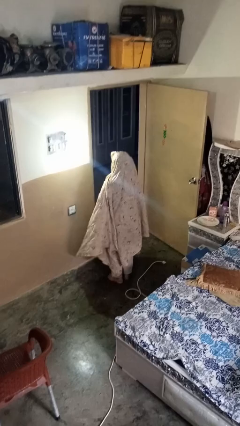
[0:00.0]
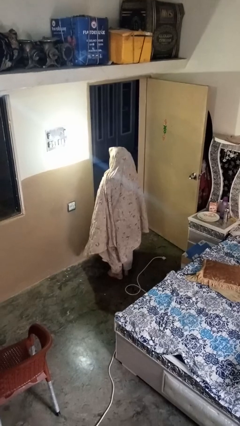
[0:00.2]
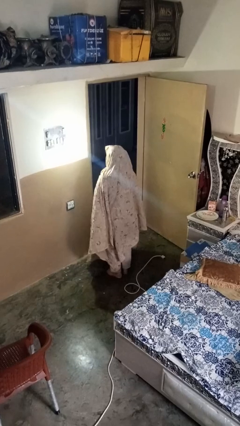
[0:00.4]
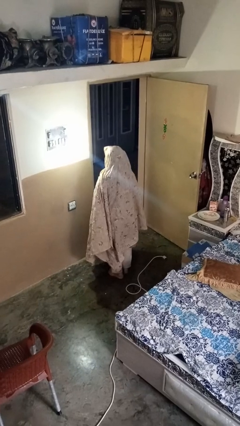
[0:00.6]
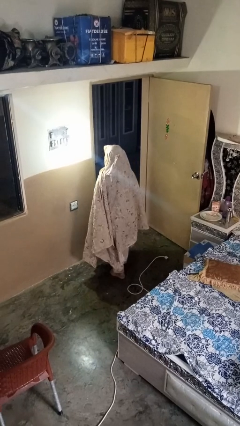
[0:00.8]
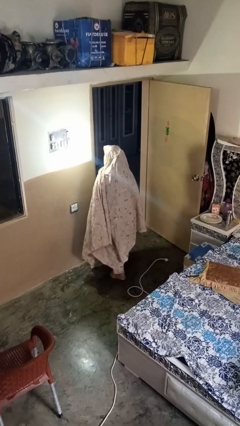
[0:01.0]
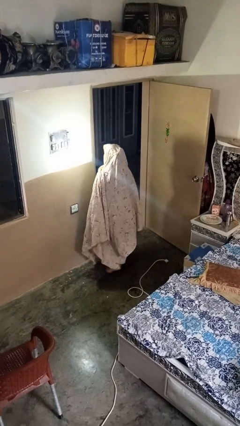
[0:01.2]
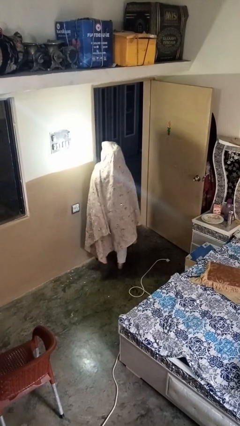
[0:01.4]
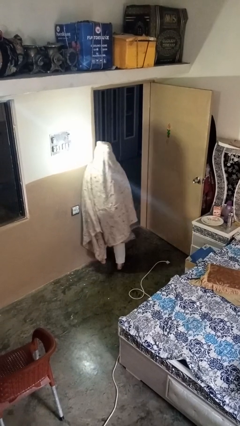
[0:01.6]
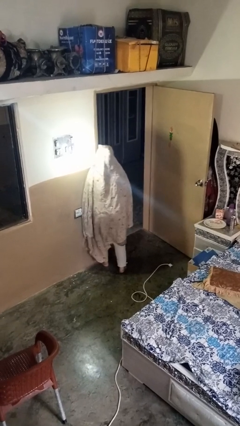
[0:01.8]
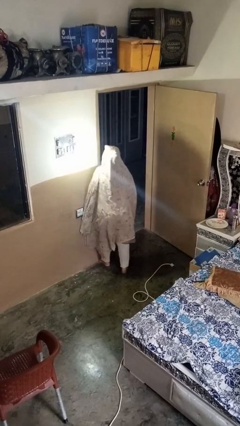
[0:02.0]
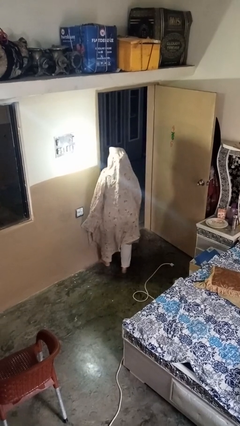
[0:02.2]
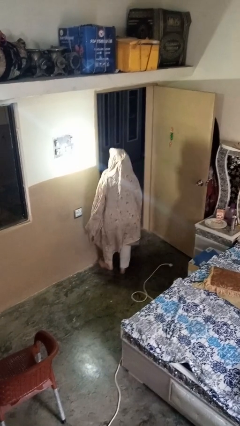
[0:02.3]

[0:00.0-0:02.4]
person bumps into wall

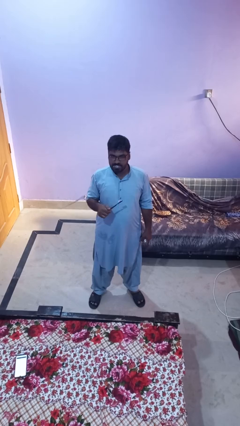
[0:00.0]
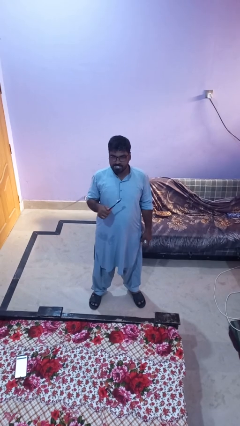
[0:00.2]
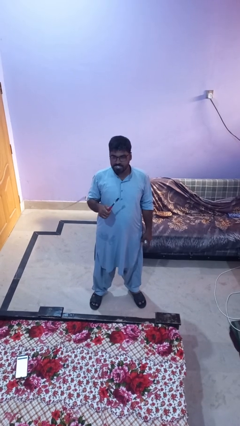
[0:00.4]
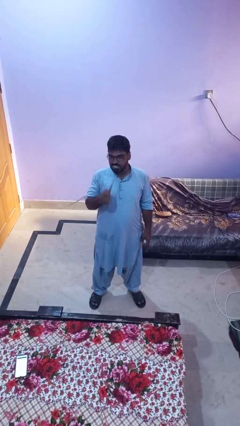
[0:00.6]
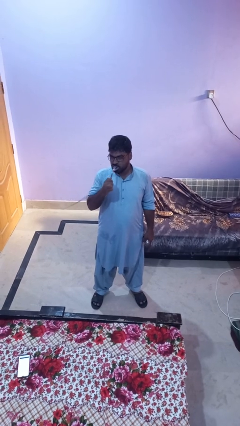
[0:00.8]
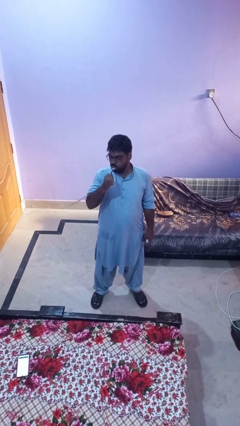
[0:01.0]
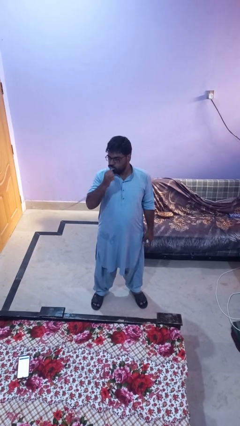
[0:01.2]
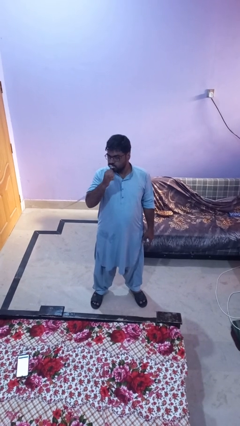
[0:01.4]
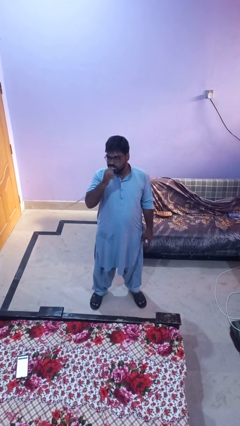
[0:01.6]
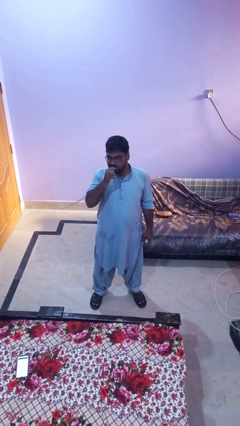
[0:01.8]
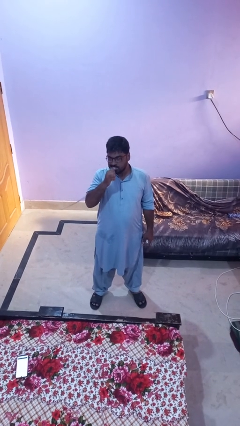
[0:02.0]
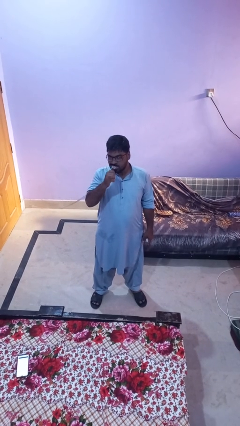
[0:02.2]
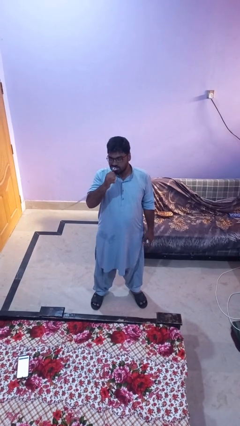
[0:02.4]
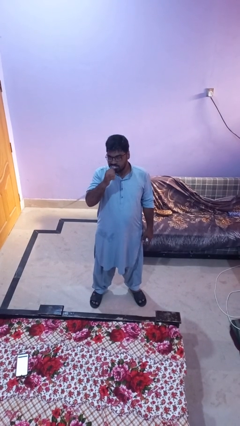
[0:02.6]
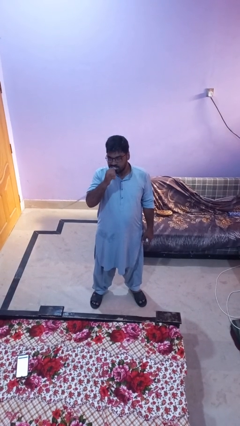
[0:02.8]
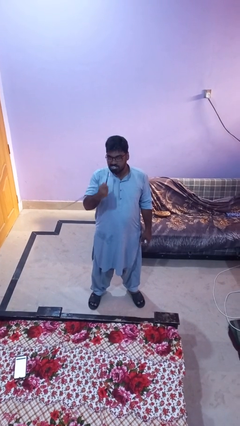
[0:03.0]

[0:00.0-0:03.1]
person brushes teeth

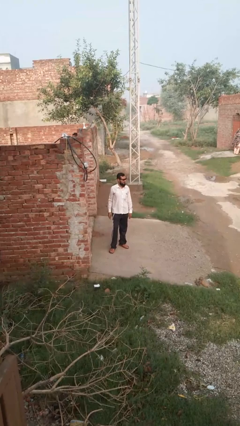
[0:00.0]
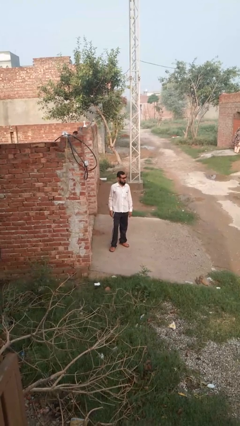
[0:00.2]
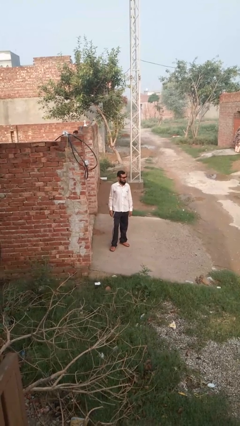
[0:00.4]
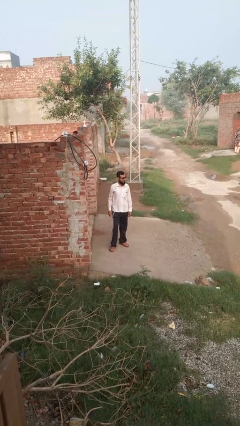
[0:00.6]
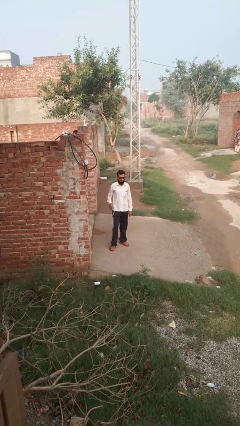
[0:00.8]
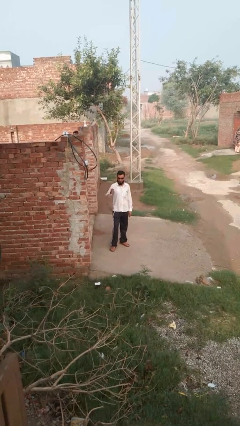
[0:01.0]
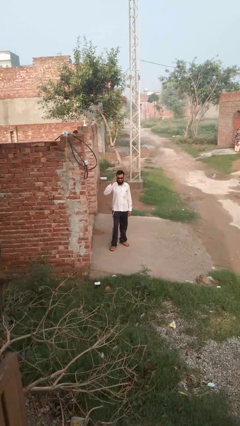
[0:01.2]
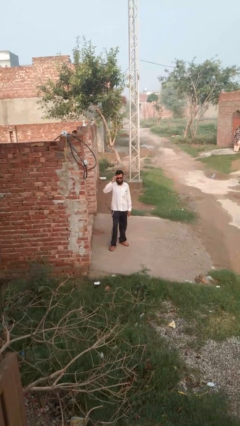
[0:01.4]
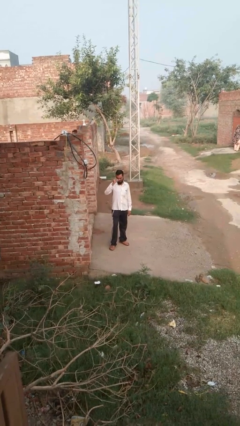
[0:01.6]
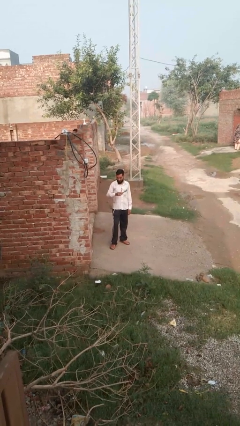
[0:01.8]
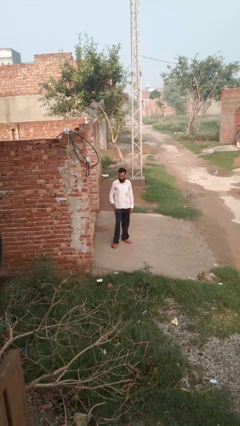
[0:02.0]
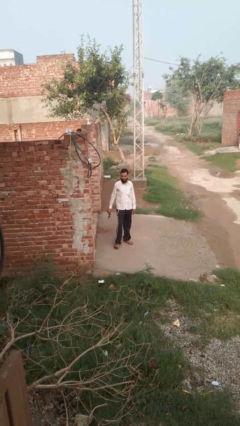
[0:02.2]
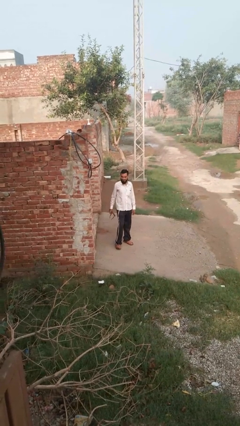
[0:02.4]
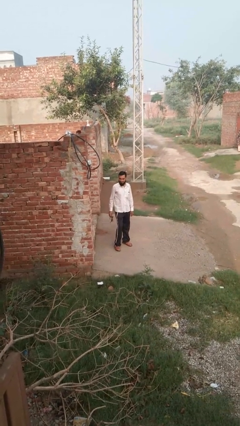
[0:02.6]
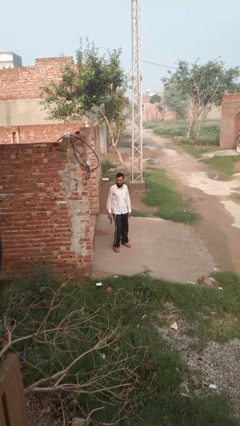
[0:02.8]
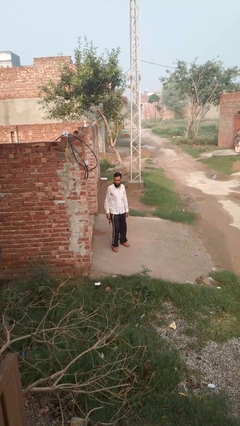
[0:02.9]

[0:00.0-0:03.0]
person takes off glasses

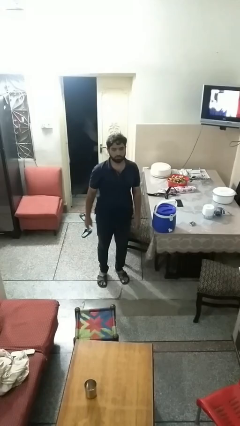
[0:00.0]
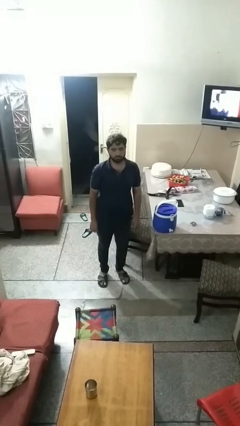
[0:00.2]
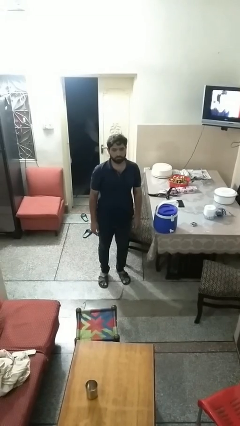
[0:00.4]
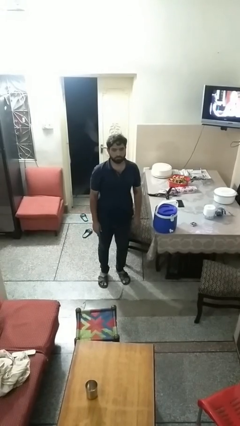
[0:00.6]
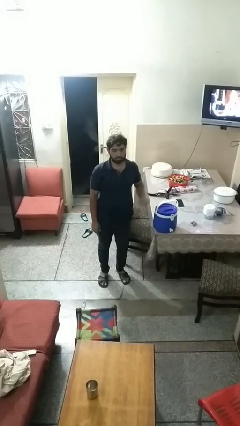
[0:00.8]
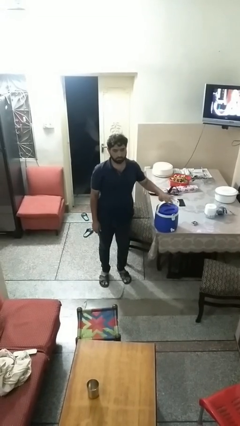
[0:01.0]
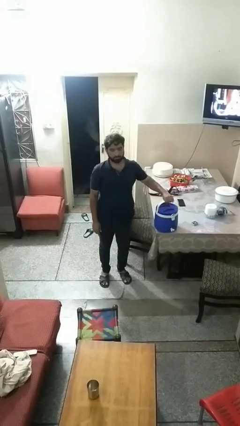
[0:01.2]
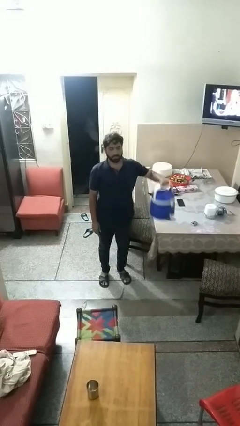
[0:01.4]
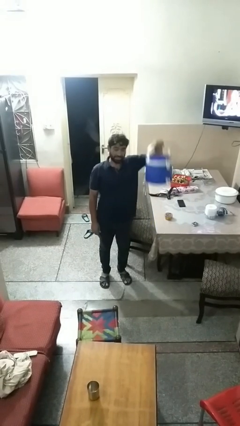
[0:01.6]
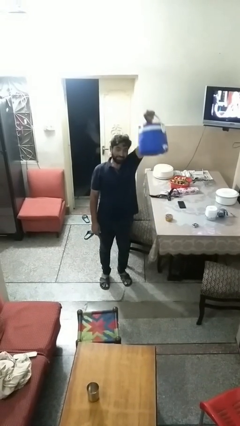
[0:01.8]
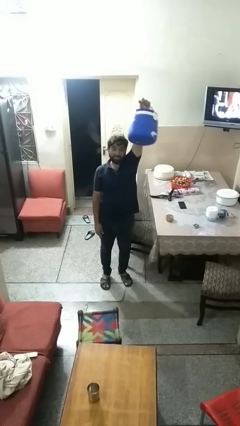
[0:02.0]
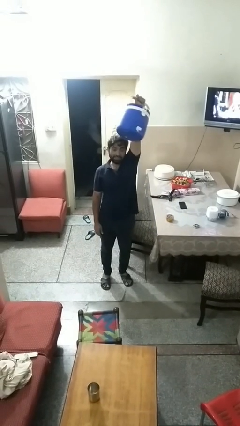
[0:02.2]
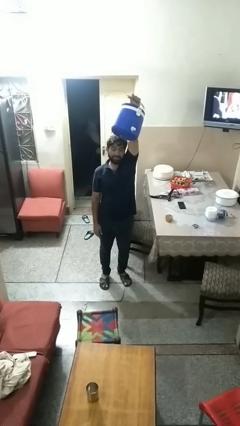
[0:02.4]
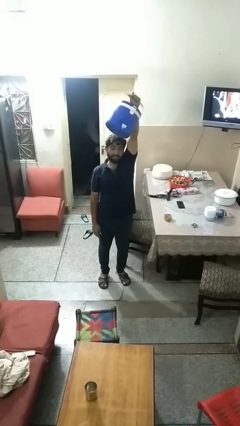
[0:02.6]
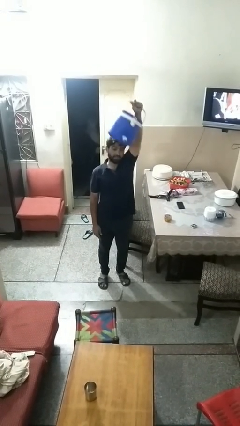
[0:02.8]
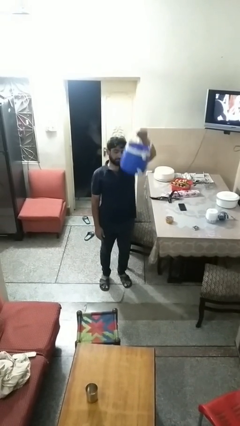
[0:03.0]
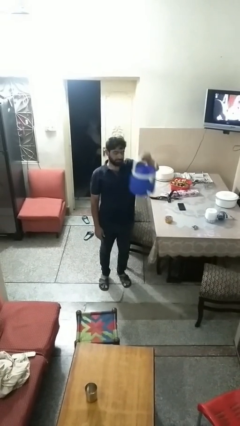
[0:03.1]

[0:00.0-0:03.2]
person holds object above head

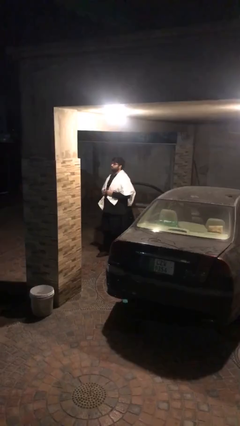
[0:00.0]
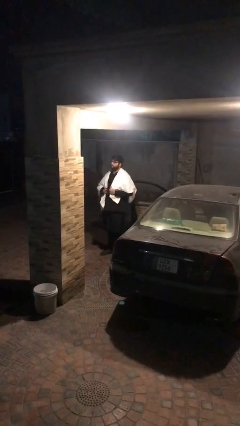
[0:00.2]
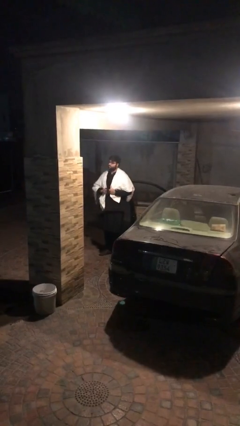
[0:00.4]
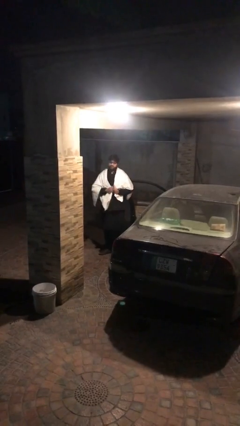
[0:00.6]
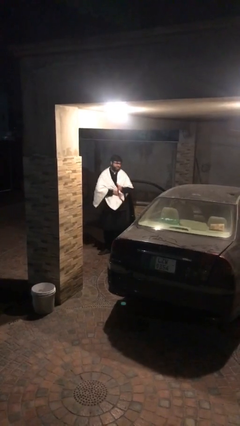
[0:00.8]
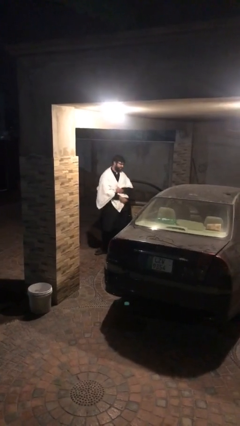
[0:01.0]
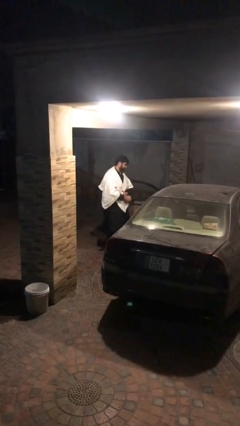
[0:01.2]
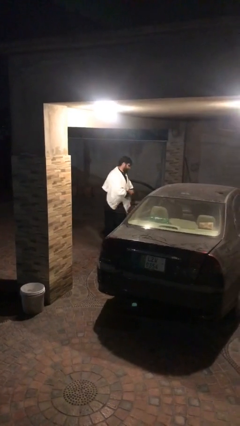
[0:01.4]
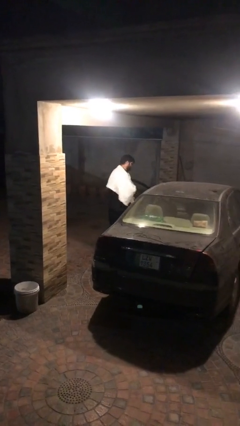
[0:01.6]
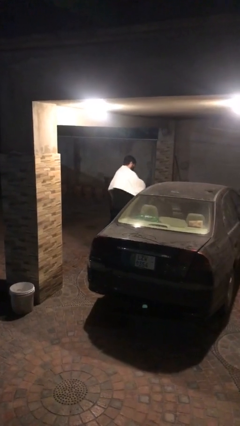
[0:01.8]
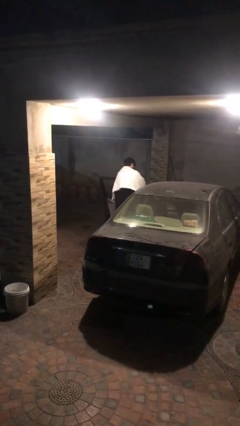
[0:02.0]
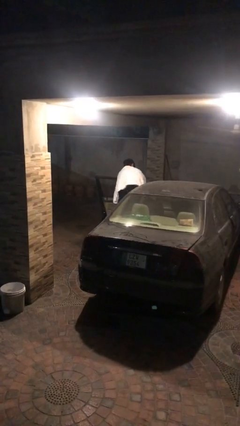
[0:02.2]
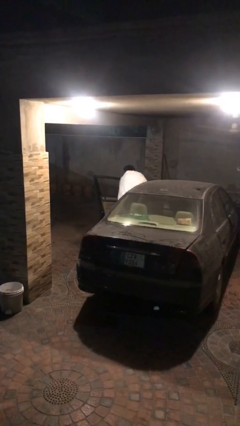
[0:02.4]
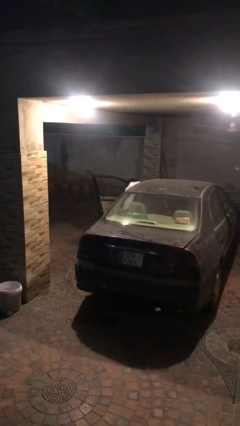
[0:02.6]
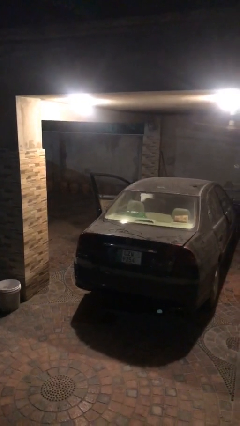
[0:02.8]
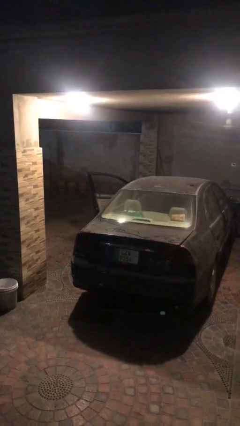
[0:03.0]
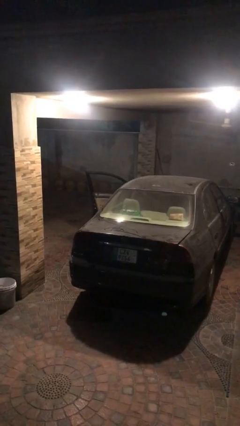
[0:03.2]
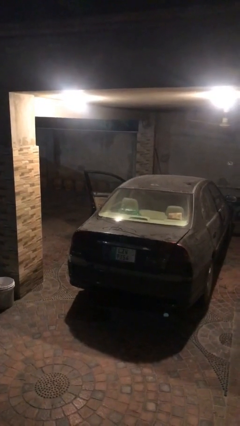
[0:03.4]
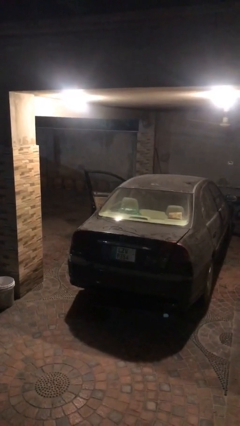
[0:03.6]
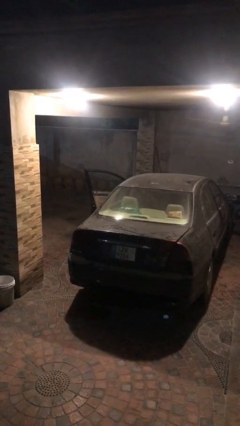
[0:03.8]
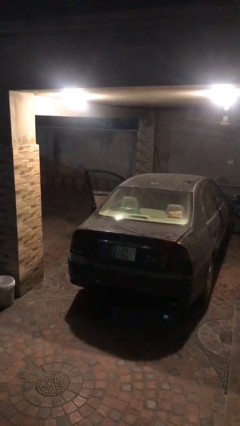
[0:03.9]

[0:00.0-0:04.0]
person enters car

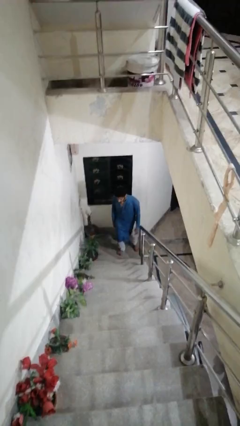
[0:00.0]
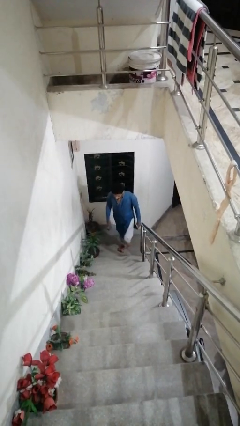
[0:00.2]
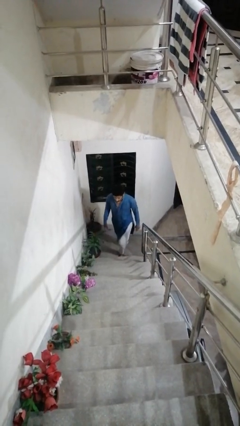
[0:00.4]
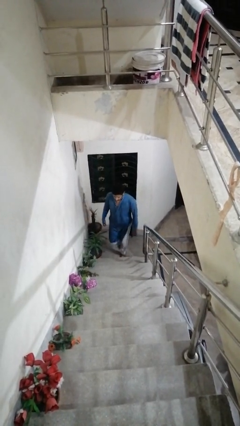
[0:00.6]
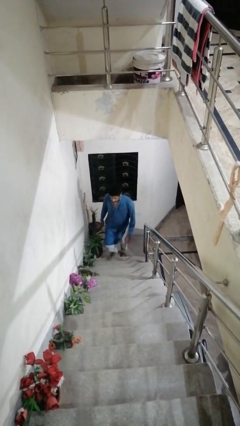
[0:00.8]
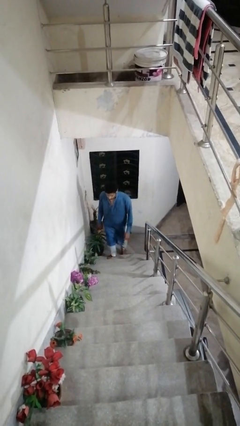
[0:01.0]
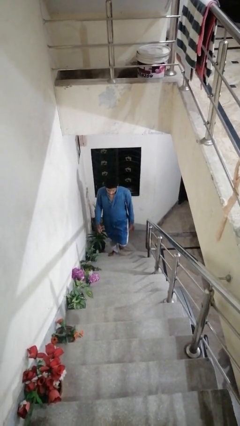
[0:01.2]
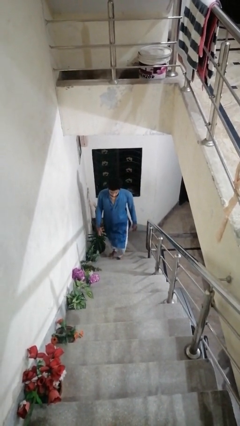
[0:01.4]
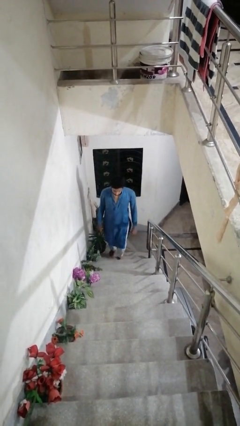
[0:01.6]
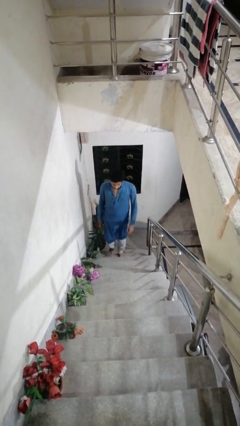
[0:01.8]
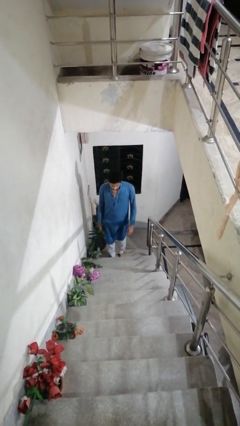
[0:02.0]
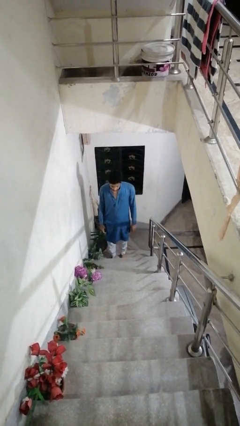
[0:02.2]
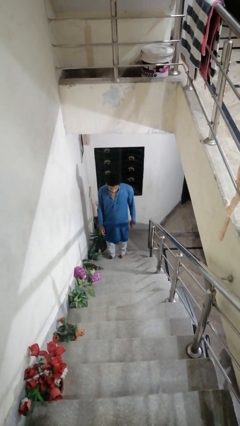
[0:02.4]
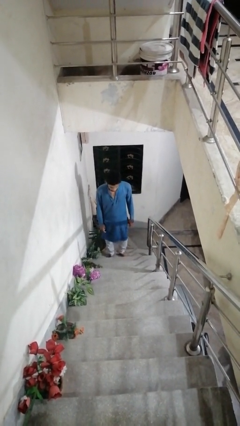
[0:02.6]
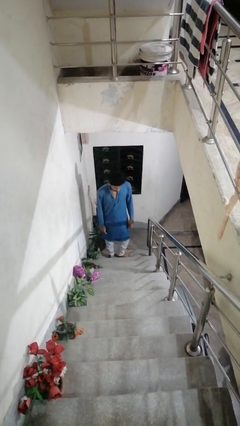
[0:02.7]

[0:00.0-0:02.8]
person climbs up stairs
